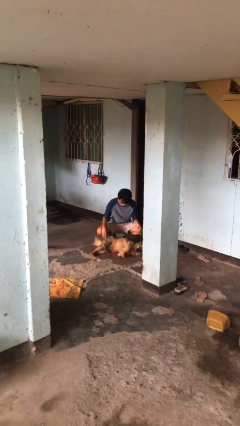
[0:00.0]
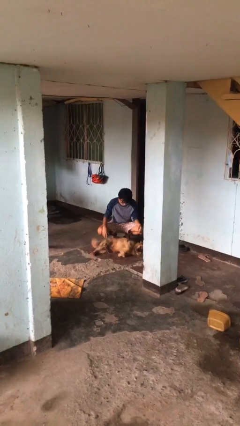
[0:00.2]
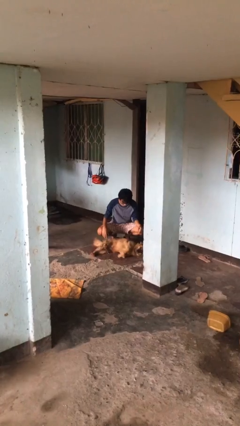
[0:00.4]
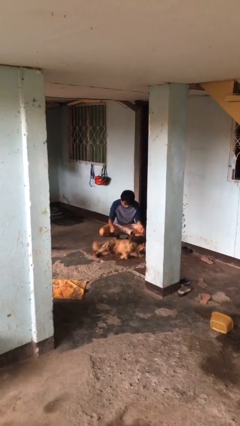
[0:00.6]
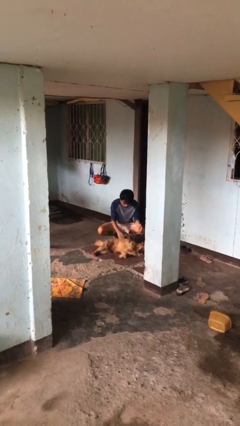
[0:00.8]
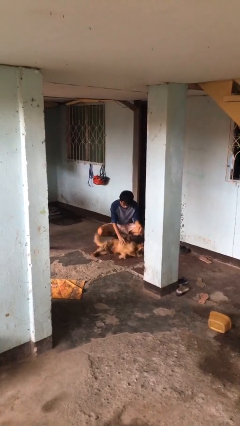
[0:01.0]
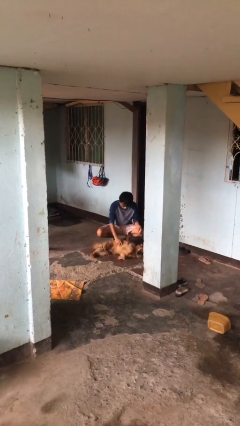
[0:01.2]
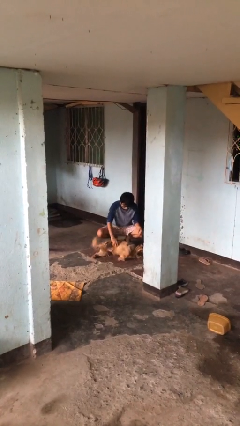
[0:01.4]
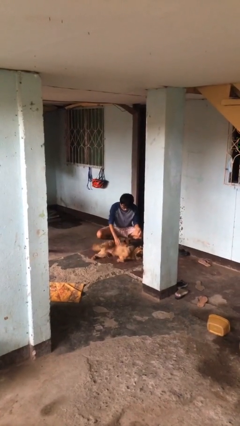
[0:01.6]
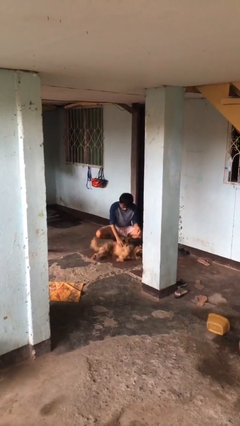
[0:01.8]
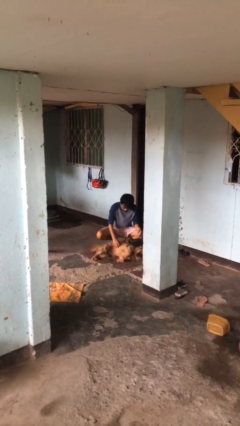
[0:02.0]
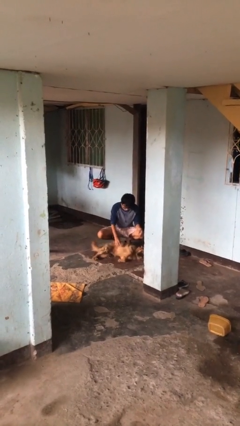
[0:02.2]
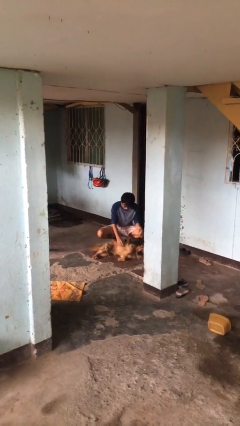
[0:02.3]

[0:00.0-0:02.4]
person pets dog

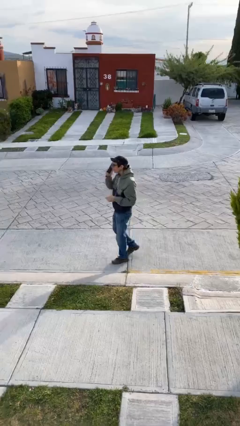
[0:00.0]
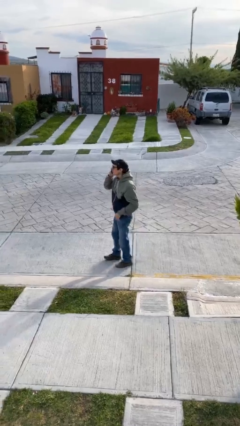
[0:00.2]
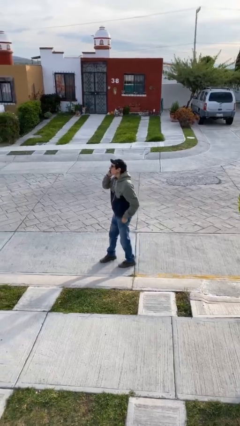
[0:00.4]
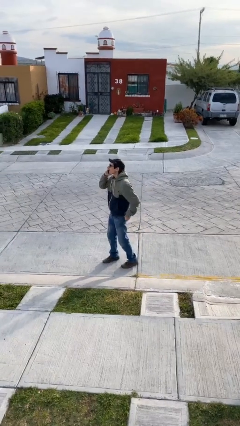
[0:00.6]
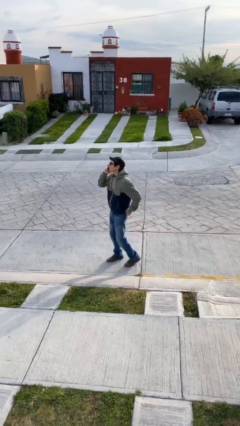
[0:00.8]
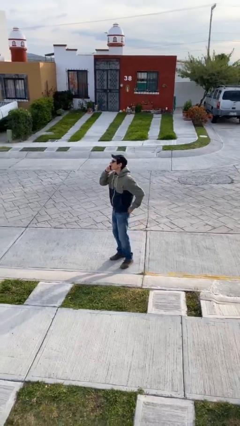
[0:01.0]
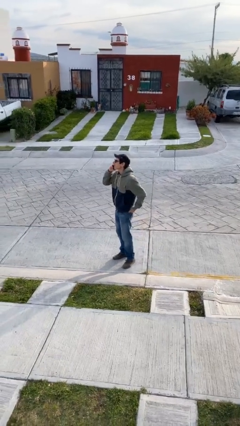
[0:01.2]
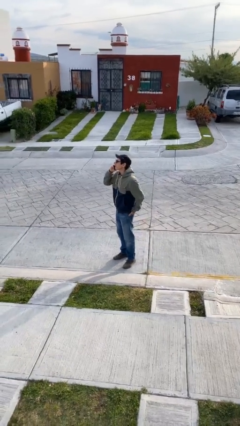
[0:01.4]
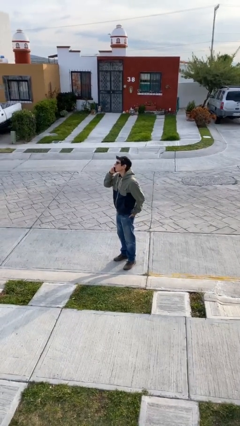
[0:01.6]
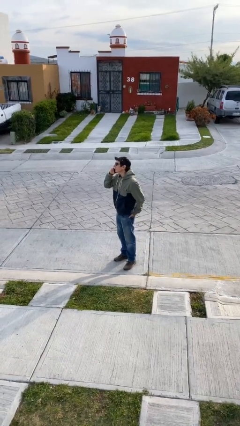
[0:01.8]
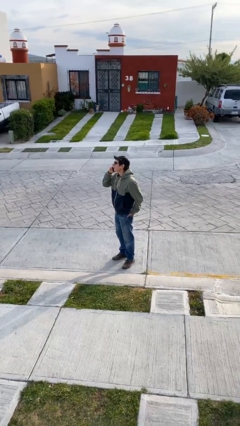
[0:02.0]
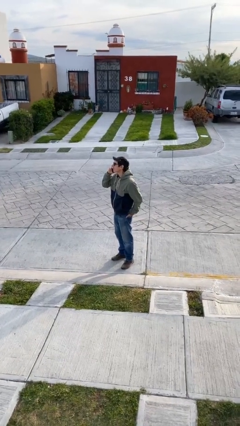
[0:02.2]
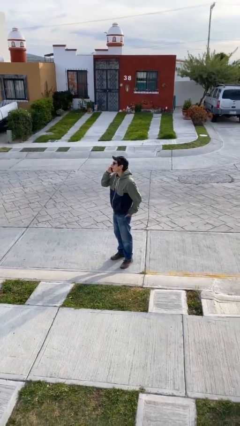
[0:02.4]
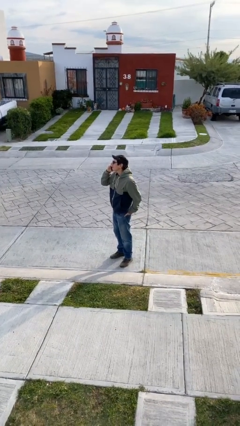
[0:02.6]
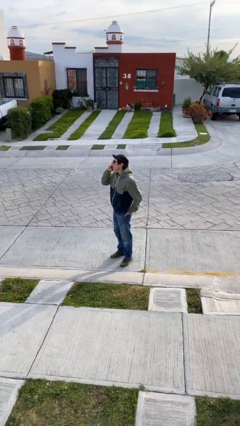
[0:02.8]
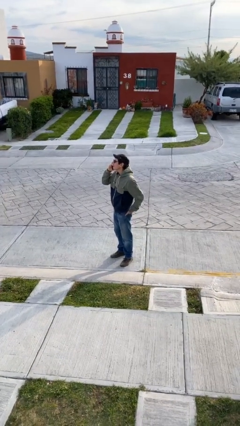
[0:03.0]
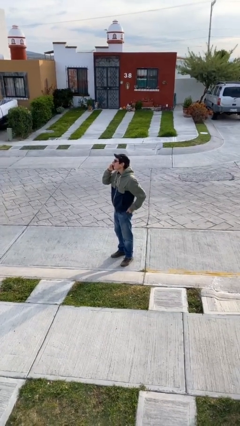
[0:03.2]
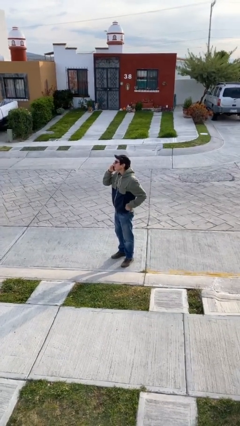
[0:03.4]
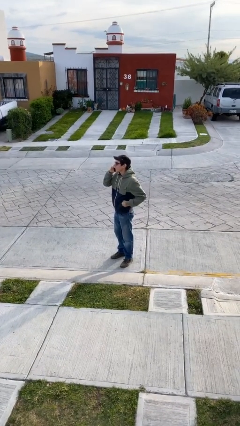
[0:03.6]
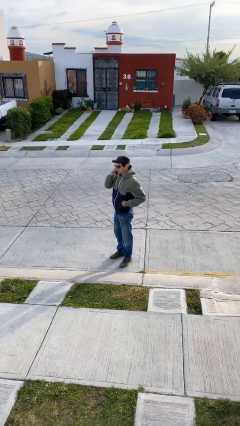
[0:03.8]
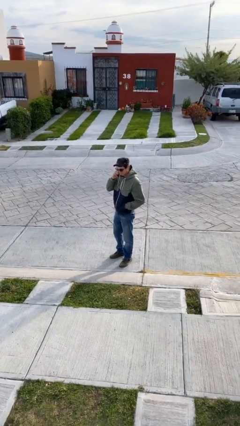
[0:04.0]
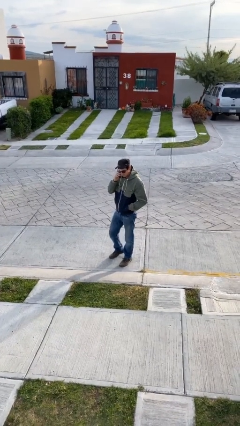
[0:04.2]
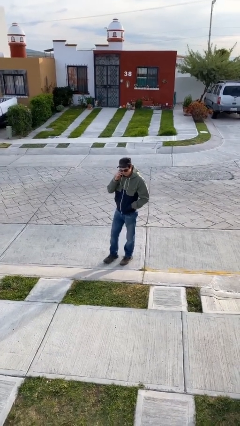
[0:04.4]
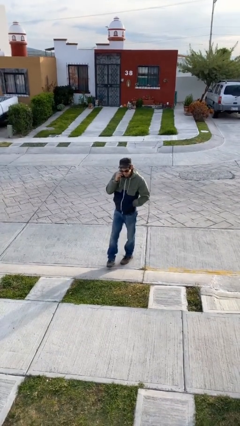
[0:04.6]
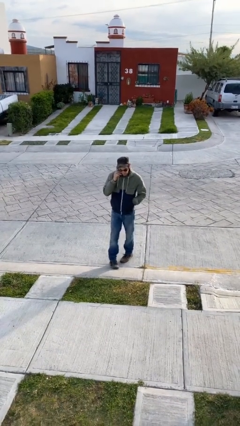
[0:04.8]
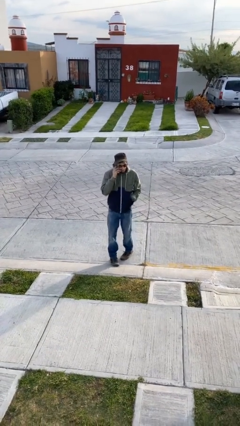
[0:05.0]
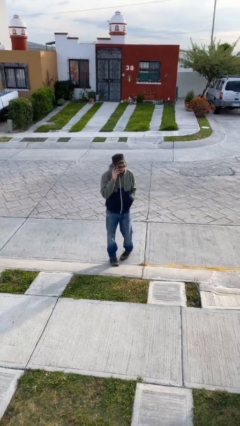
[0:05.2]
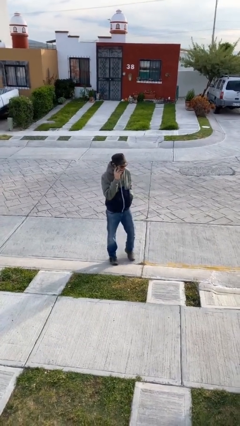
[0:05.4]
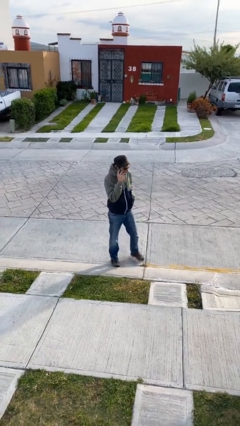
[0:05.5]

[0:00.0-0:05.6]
person talks on phone

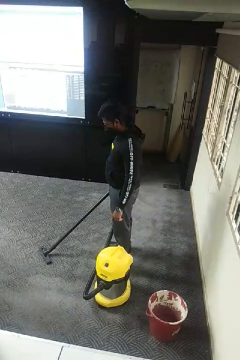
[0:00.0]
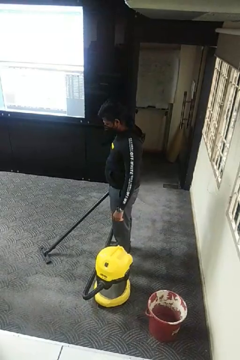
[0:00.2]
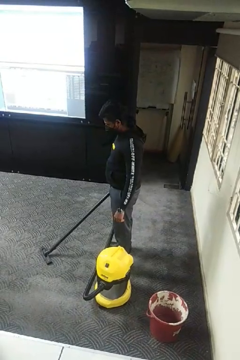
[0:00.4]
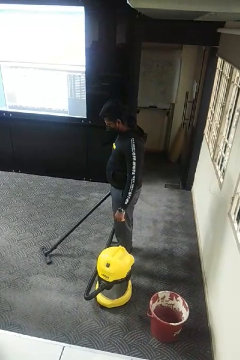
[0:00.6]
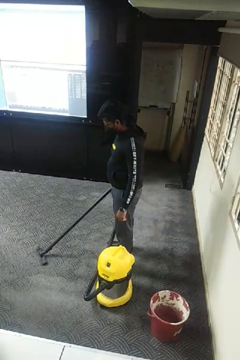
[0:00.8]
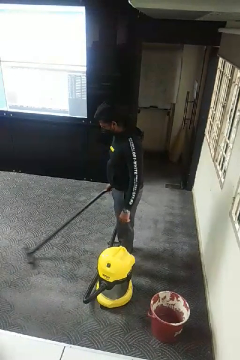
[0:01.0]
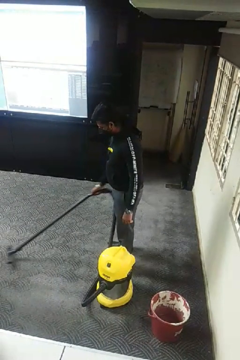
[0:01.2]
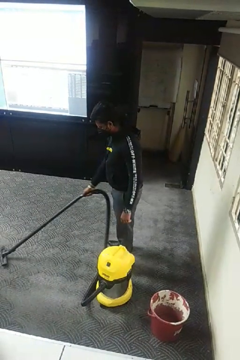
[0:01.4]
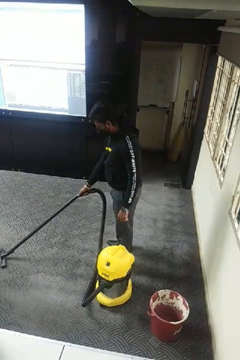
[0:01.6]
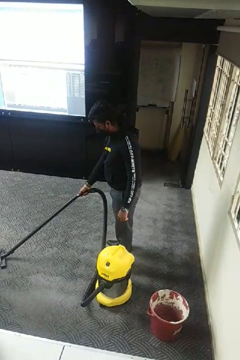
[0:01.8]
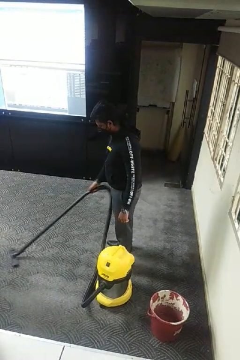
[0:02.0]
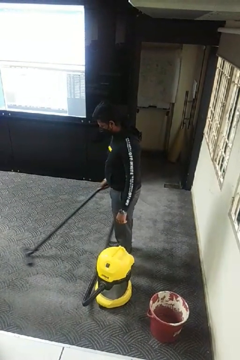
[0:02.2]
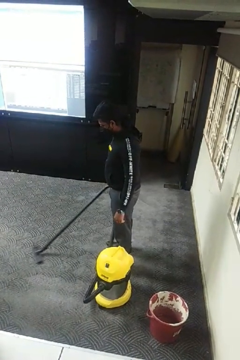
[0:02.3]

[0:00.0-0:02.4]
person vacuums carpet

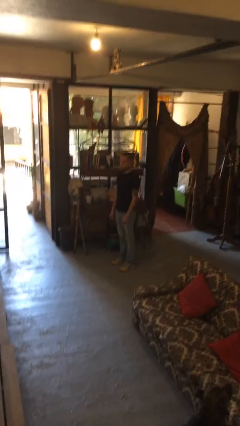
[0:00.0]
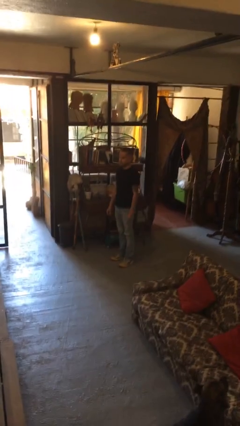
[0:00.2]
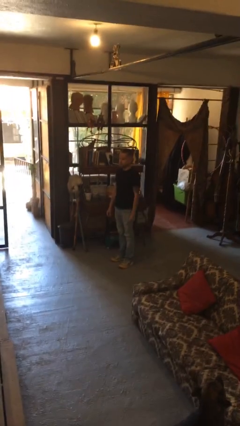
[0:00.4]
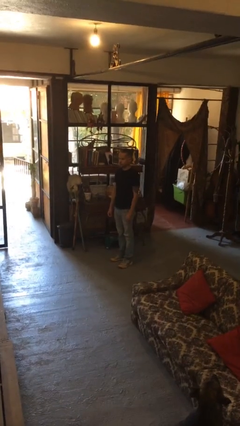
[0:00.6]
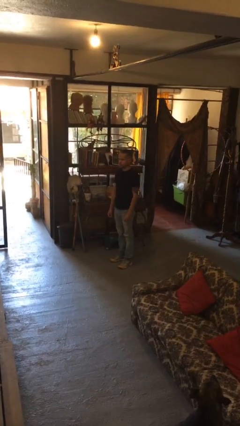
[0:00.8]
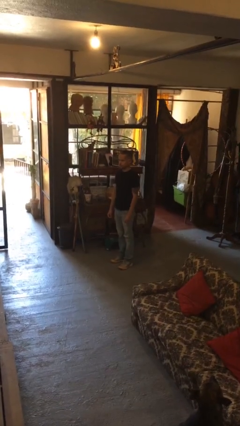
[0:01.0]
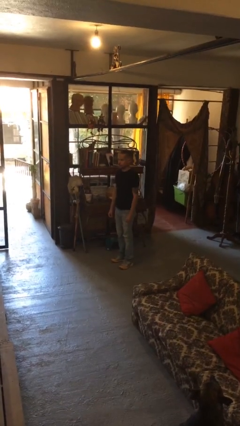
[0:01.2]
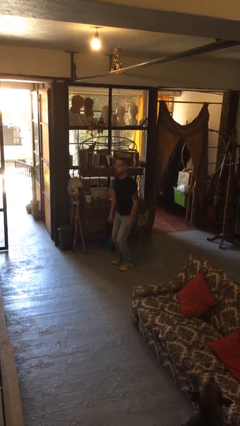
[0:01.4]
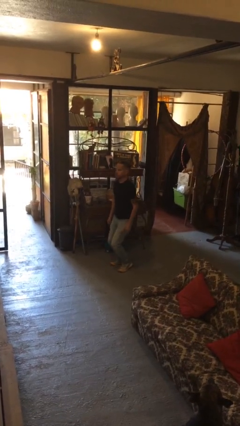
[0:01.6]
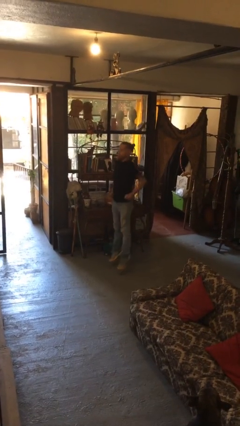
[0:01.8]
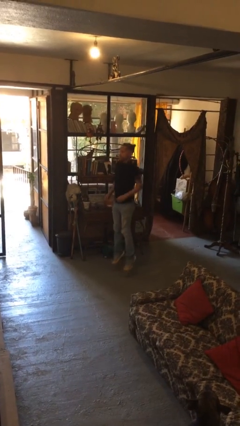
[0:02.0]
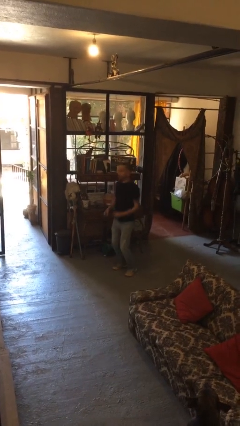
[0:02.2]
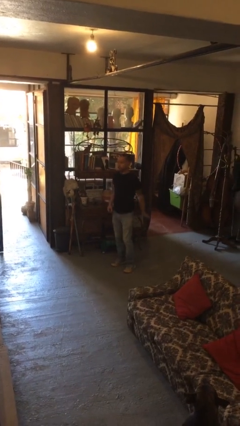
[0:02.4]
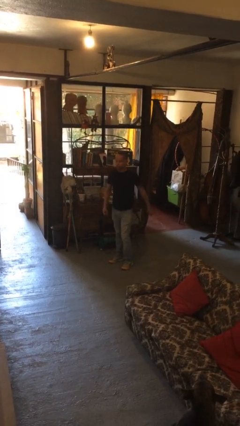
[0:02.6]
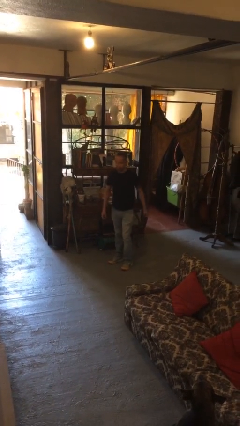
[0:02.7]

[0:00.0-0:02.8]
person jumps

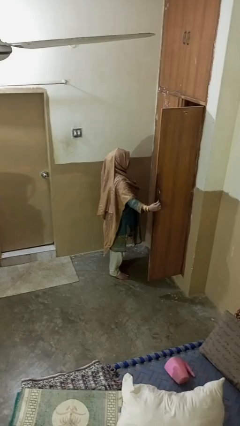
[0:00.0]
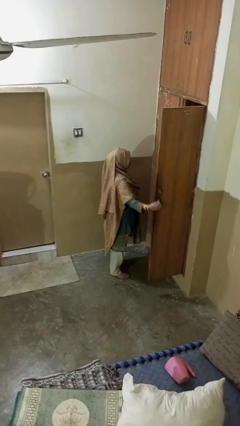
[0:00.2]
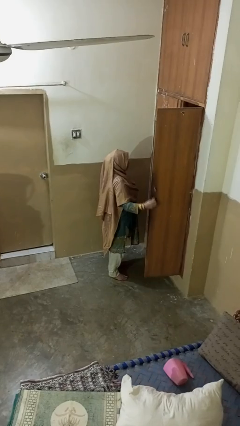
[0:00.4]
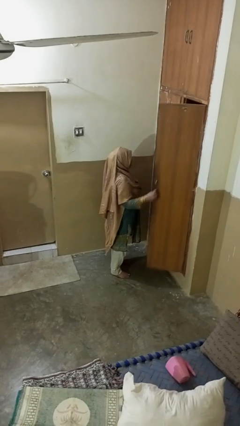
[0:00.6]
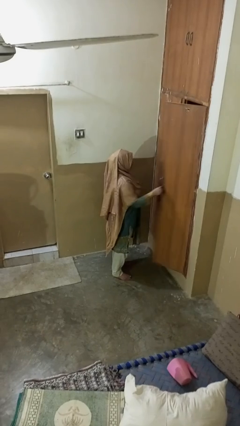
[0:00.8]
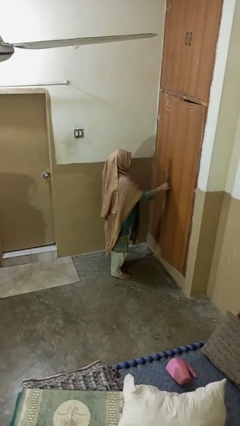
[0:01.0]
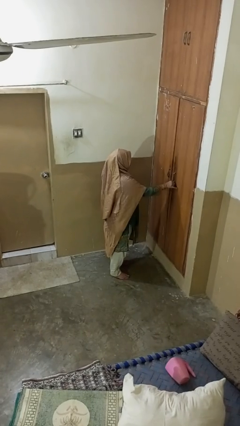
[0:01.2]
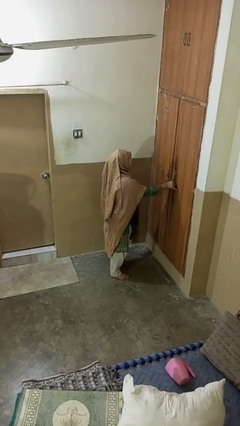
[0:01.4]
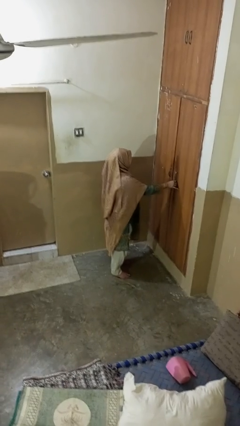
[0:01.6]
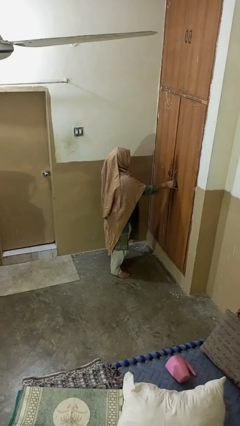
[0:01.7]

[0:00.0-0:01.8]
person closes closet door

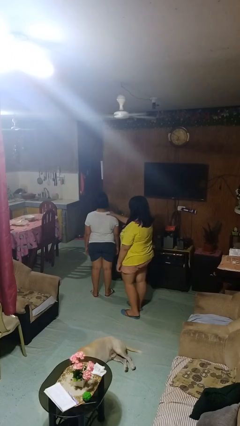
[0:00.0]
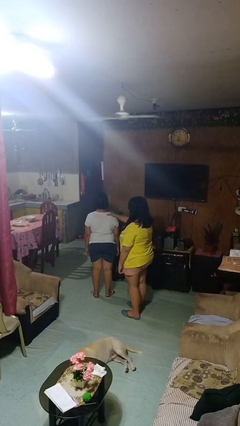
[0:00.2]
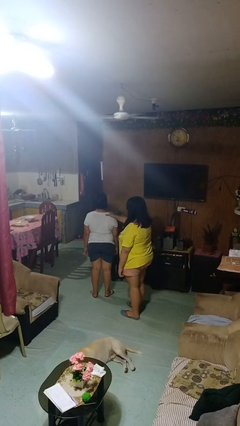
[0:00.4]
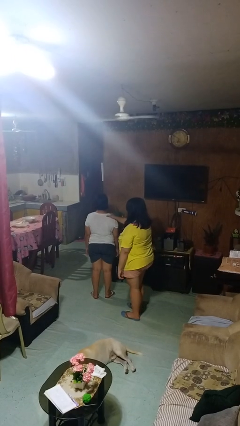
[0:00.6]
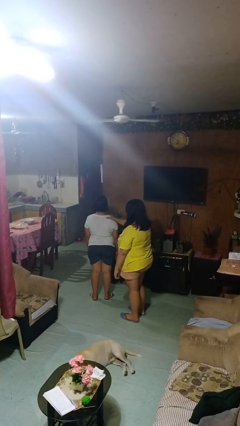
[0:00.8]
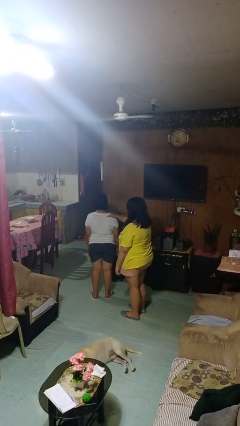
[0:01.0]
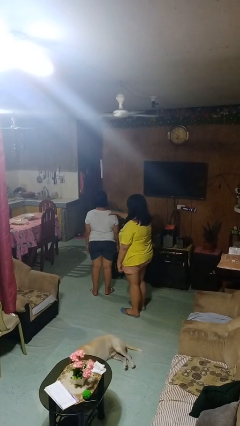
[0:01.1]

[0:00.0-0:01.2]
person grabs person by shoulder

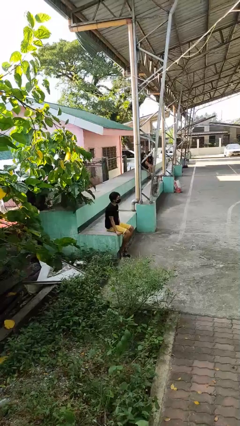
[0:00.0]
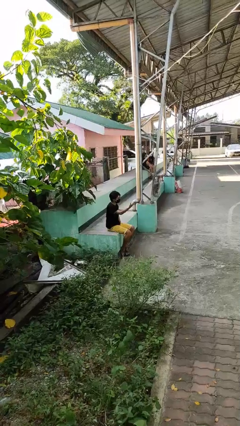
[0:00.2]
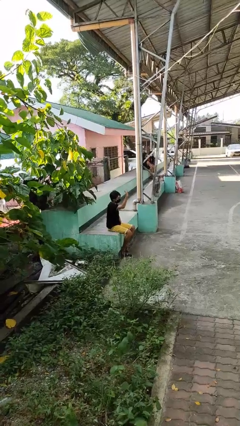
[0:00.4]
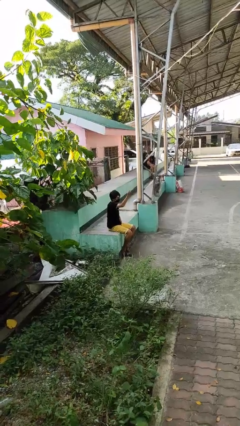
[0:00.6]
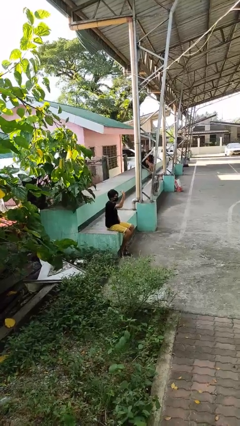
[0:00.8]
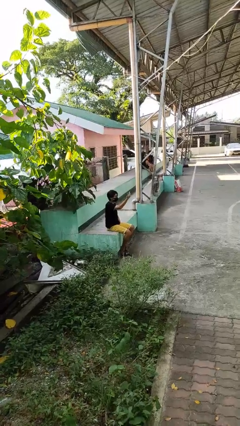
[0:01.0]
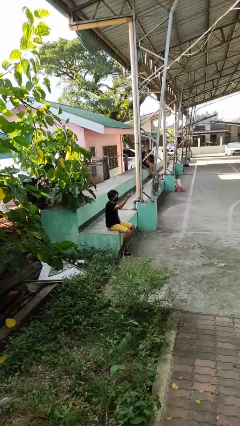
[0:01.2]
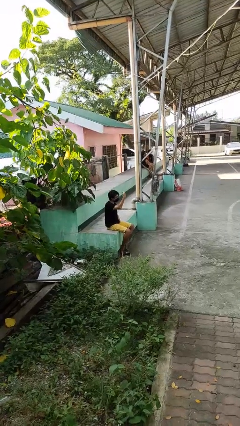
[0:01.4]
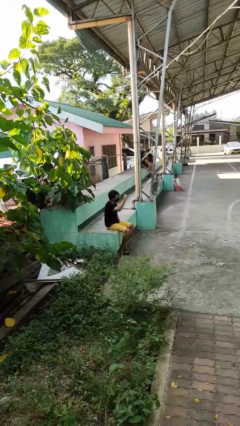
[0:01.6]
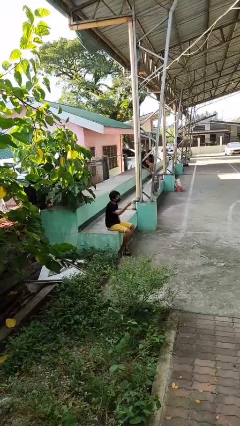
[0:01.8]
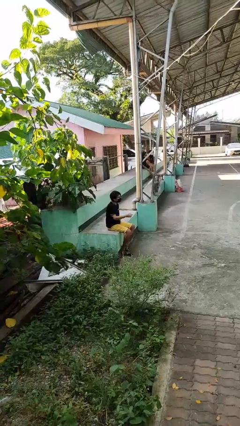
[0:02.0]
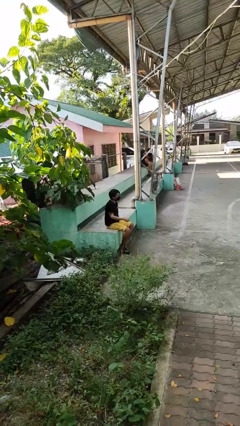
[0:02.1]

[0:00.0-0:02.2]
person gestures come here
